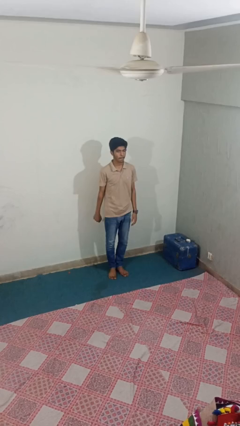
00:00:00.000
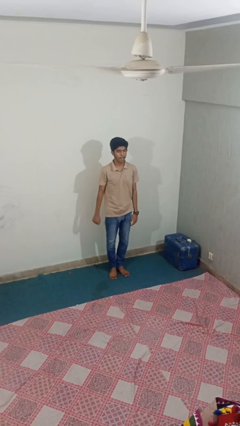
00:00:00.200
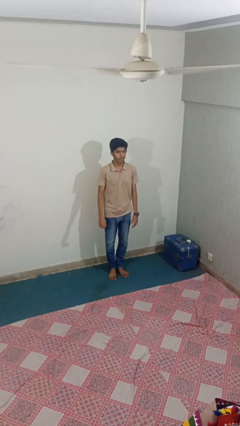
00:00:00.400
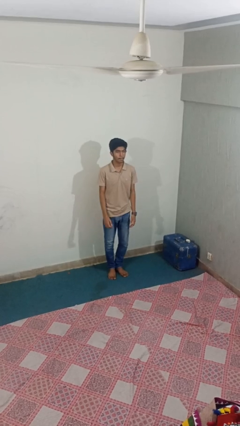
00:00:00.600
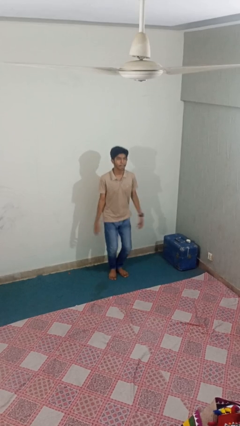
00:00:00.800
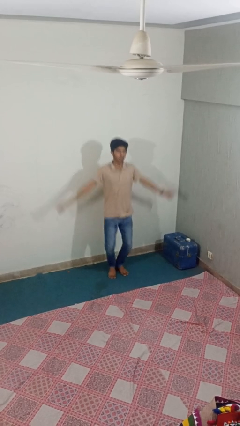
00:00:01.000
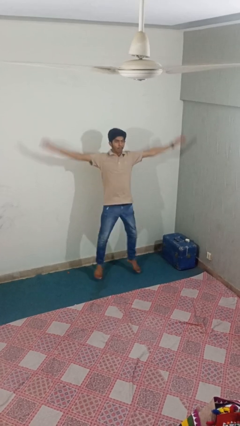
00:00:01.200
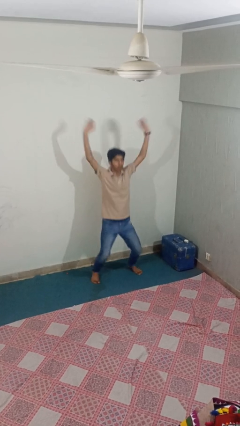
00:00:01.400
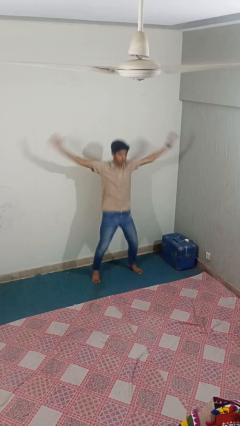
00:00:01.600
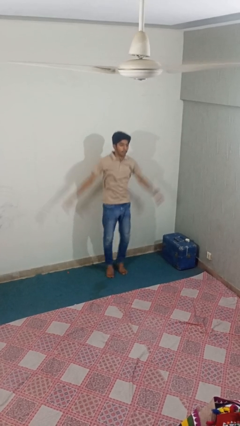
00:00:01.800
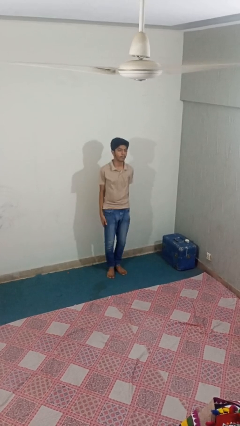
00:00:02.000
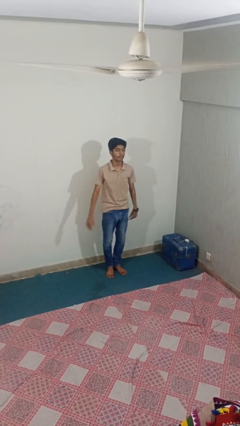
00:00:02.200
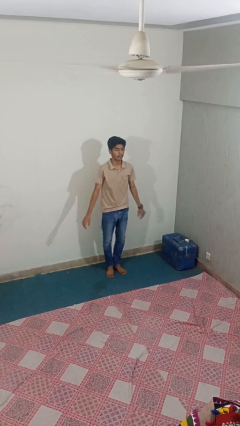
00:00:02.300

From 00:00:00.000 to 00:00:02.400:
person exercises with jumping jacks

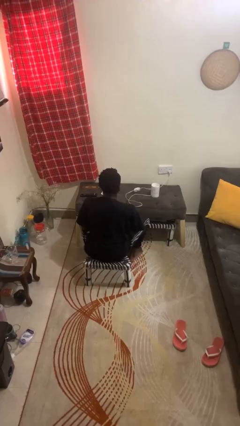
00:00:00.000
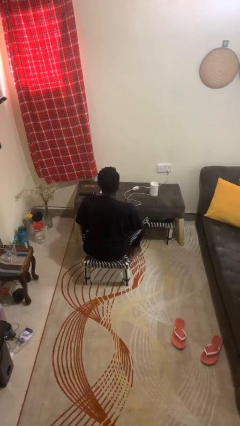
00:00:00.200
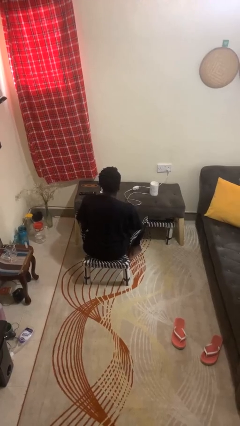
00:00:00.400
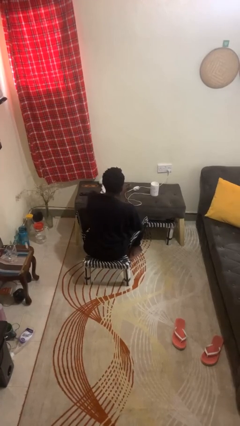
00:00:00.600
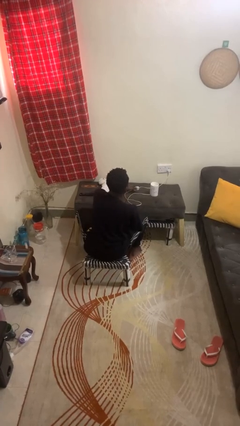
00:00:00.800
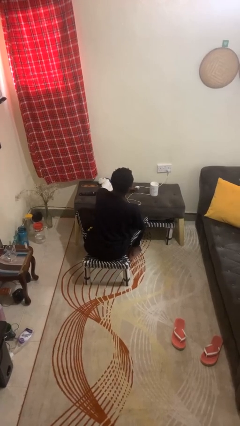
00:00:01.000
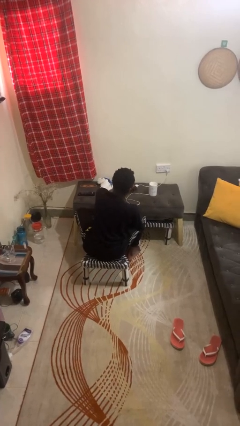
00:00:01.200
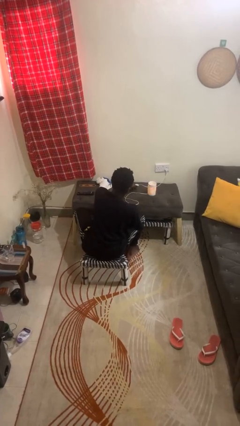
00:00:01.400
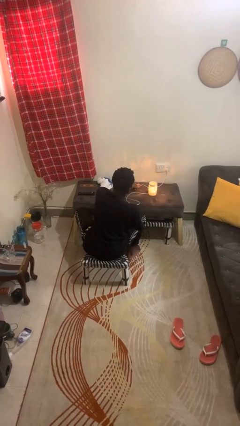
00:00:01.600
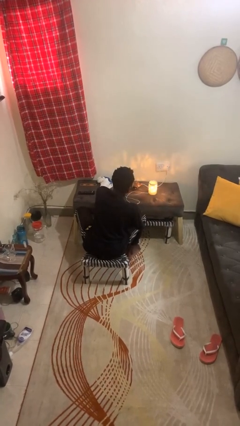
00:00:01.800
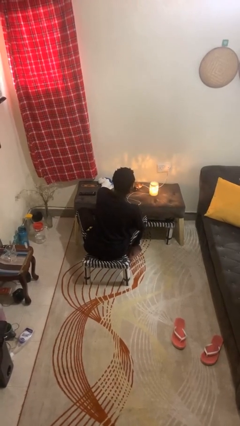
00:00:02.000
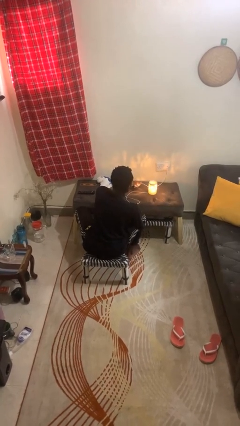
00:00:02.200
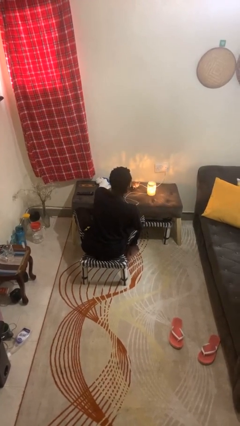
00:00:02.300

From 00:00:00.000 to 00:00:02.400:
person turns on lamp

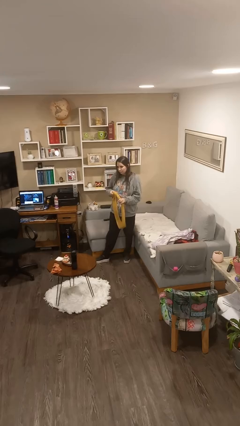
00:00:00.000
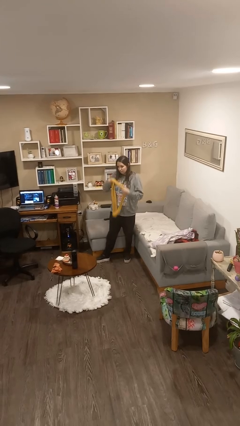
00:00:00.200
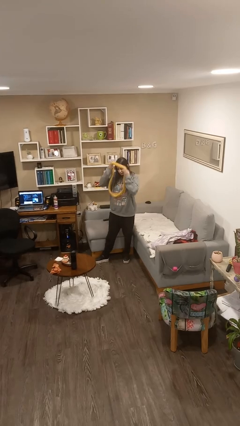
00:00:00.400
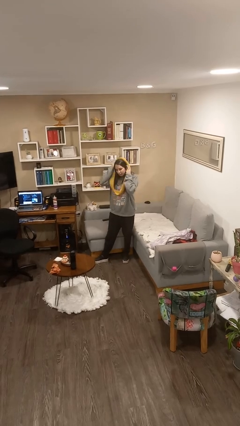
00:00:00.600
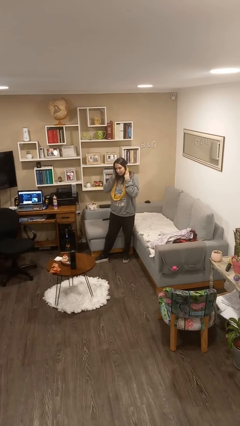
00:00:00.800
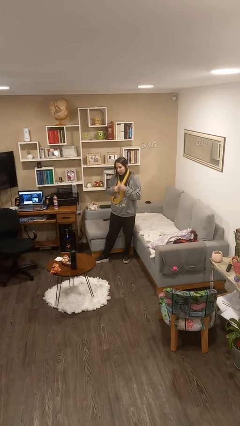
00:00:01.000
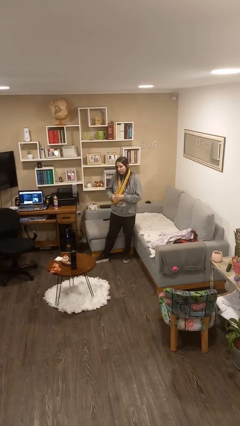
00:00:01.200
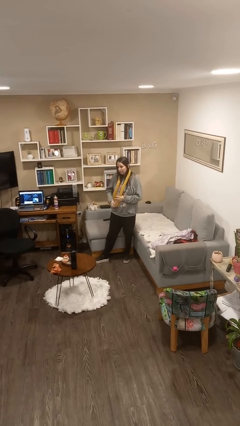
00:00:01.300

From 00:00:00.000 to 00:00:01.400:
person puts on scarf

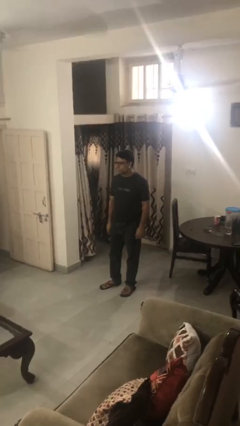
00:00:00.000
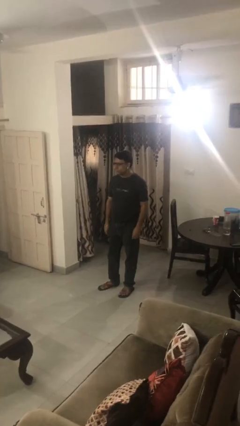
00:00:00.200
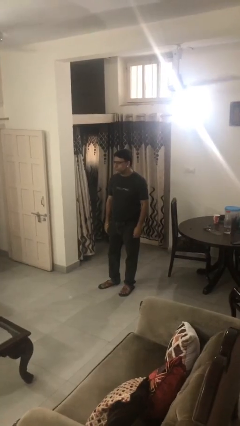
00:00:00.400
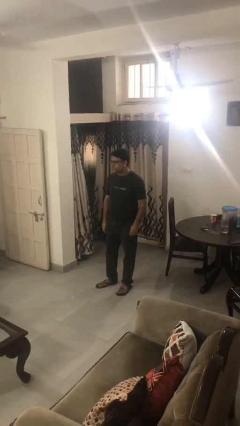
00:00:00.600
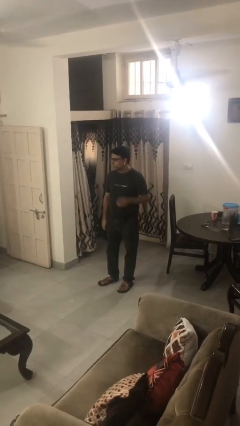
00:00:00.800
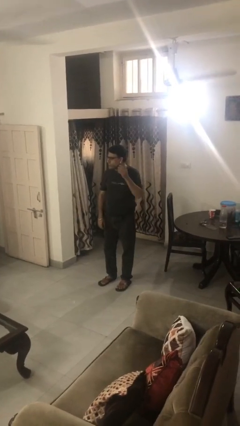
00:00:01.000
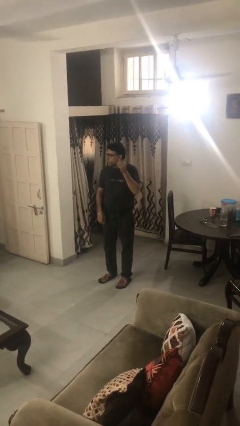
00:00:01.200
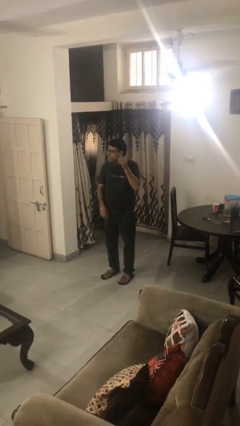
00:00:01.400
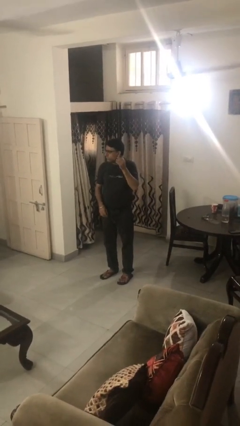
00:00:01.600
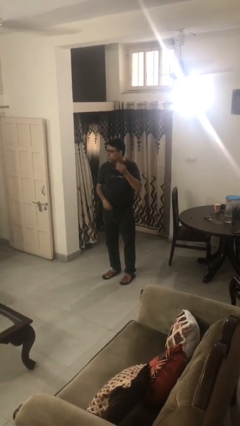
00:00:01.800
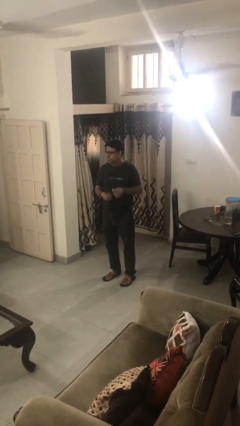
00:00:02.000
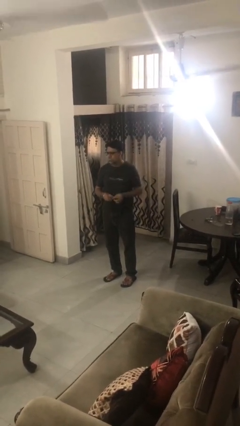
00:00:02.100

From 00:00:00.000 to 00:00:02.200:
person takes off earrings

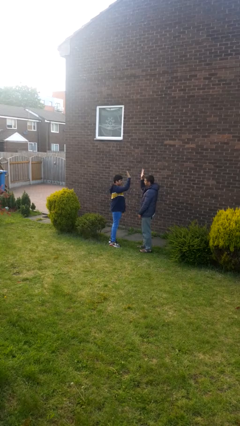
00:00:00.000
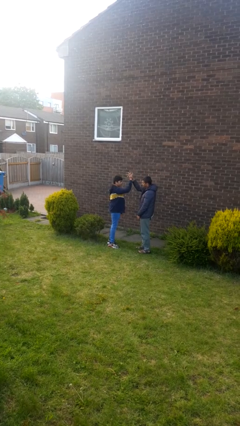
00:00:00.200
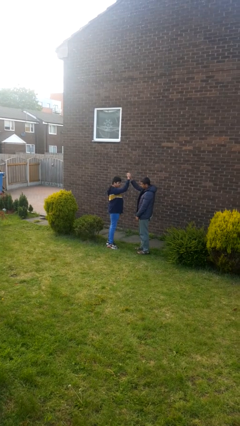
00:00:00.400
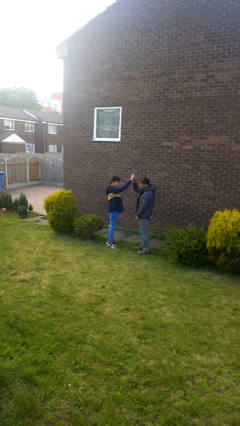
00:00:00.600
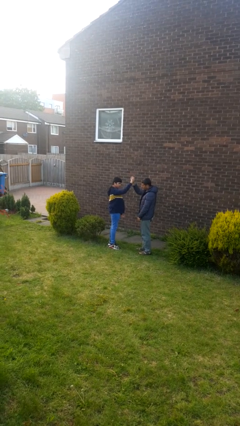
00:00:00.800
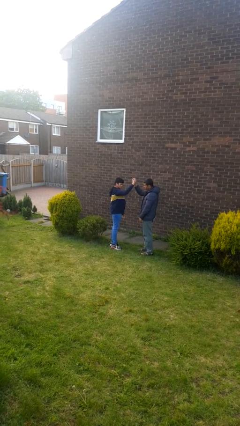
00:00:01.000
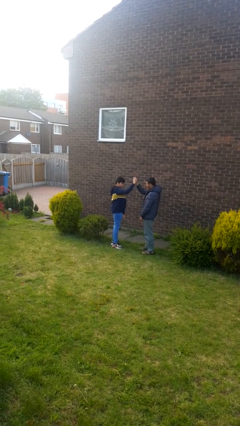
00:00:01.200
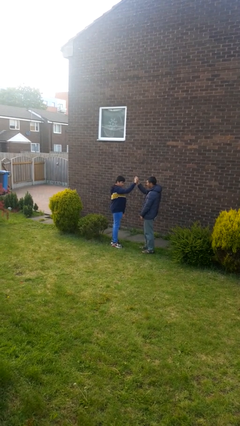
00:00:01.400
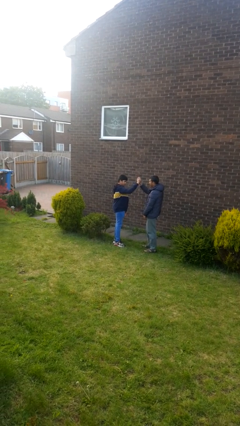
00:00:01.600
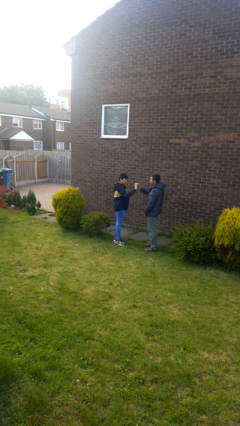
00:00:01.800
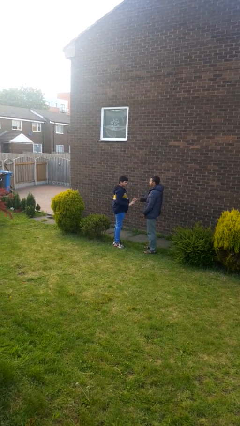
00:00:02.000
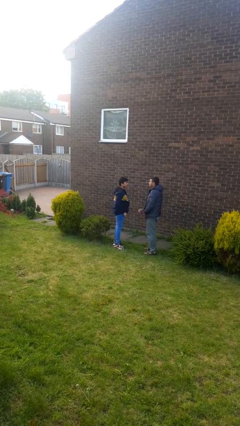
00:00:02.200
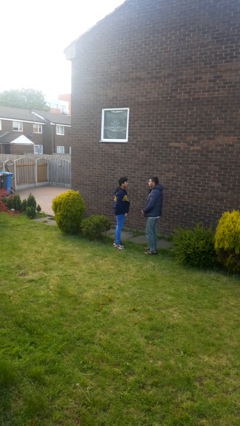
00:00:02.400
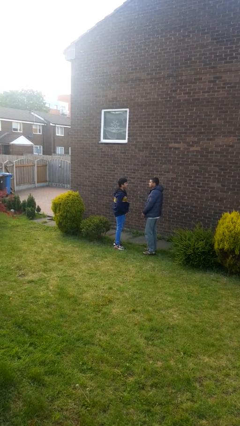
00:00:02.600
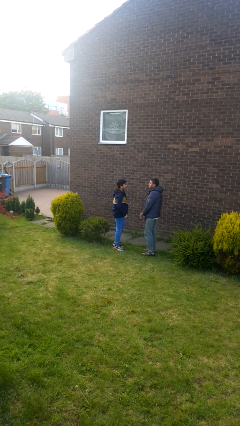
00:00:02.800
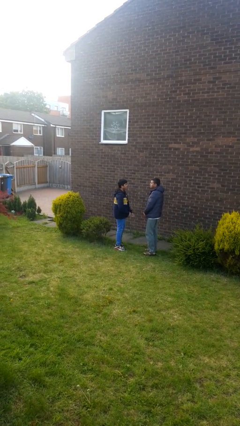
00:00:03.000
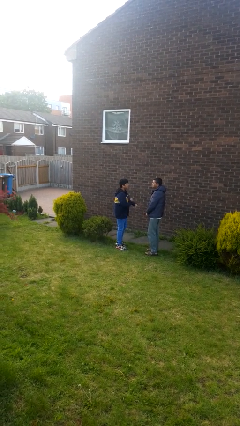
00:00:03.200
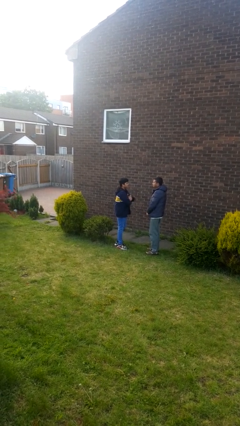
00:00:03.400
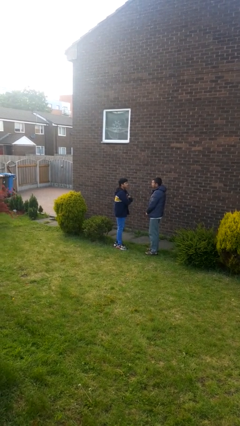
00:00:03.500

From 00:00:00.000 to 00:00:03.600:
person highfives hand

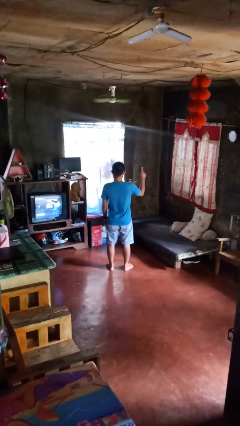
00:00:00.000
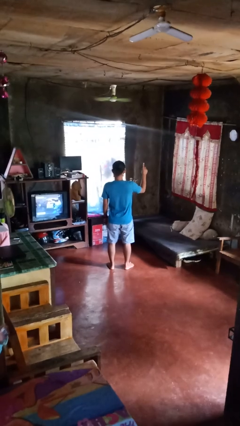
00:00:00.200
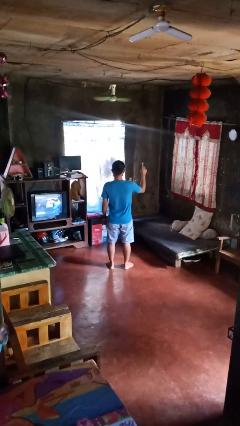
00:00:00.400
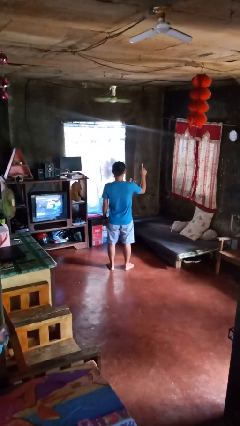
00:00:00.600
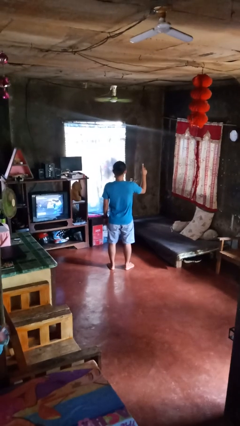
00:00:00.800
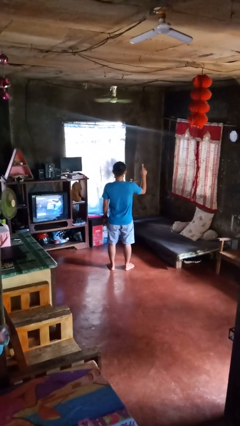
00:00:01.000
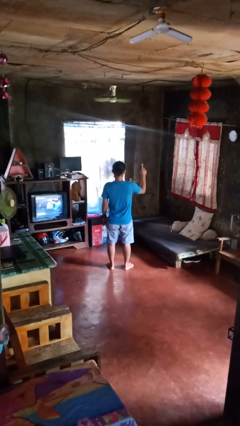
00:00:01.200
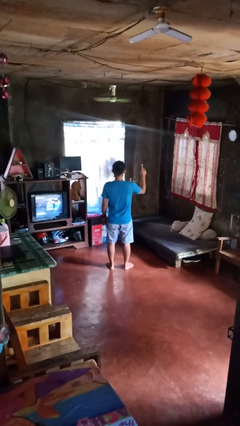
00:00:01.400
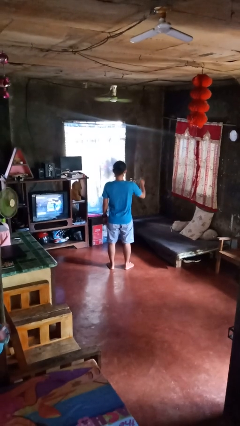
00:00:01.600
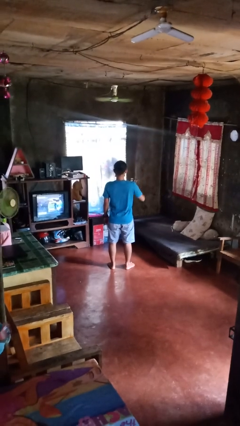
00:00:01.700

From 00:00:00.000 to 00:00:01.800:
person gestures number one

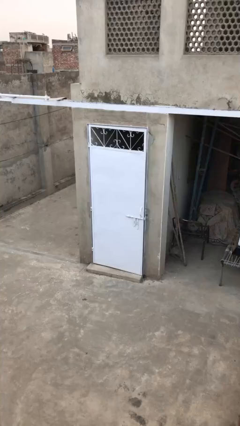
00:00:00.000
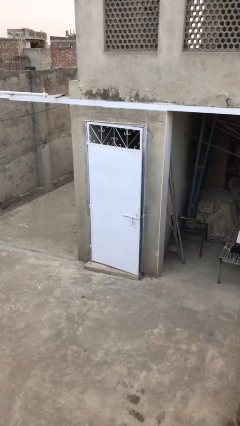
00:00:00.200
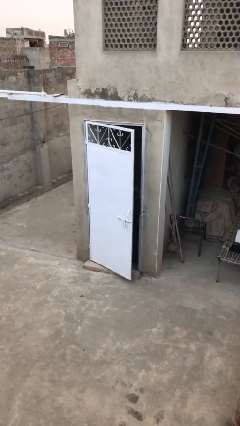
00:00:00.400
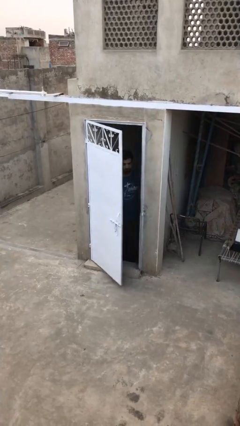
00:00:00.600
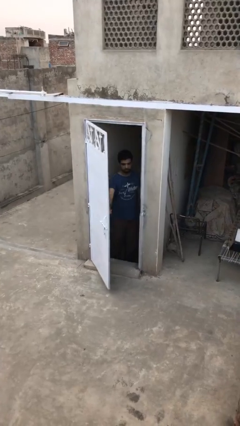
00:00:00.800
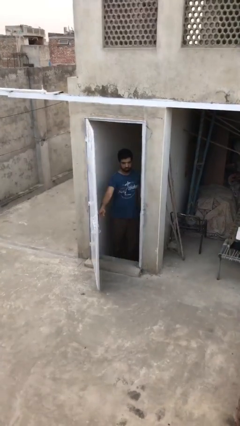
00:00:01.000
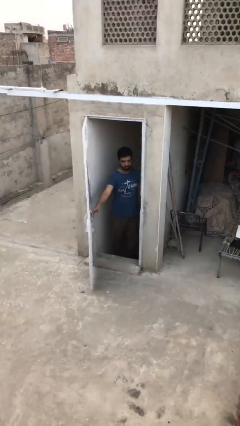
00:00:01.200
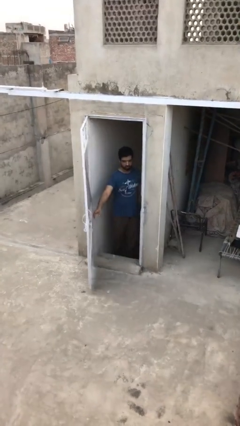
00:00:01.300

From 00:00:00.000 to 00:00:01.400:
person opens facility door

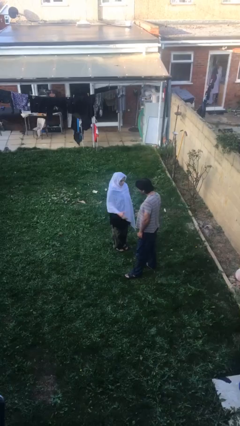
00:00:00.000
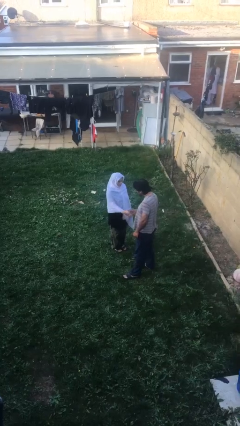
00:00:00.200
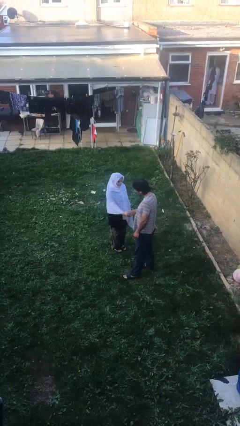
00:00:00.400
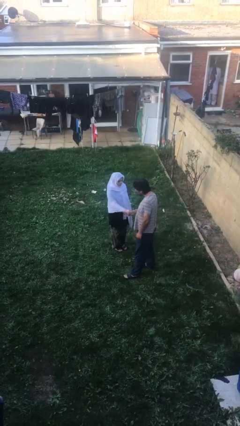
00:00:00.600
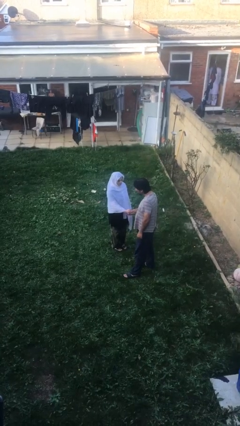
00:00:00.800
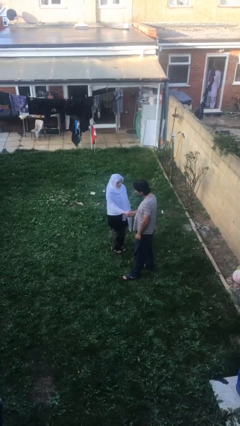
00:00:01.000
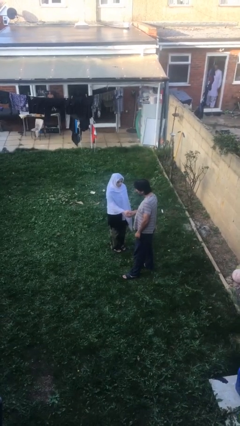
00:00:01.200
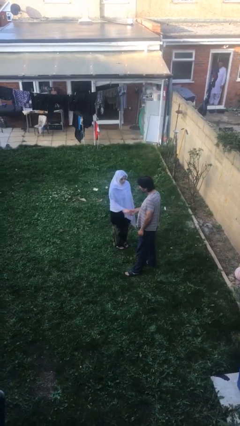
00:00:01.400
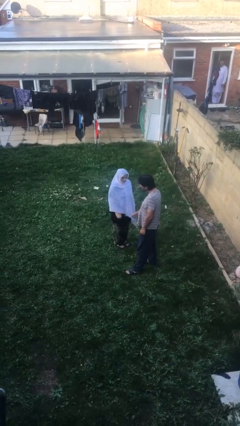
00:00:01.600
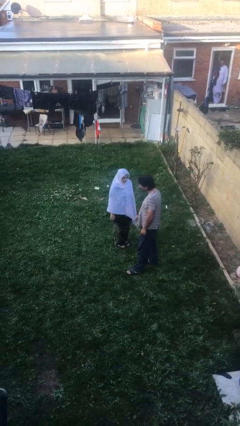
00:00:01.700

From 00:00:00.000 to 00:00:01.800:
person shakes hand
